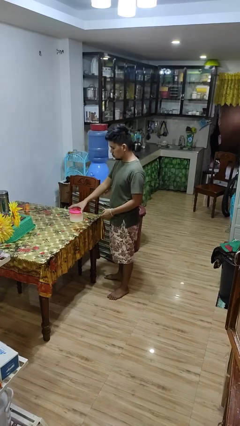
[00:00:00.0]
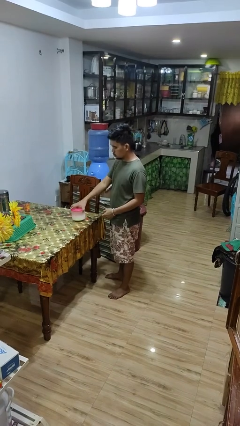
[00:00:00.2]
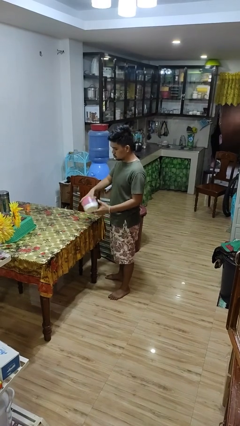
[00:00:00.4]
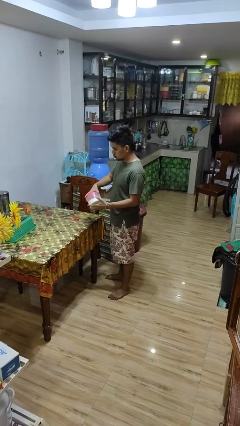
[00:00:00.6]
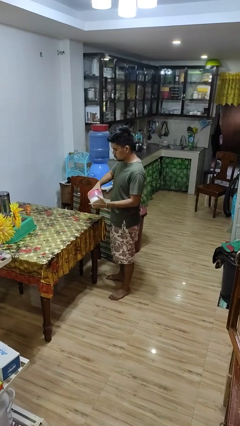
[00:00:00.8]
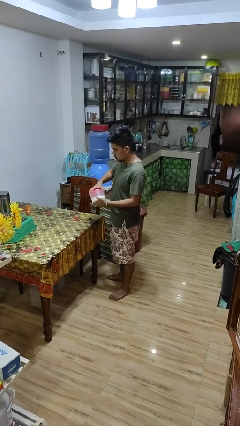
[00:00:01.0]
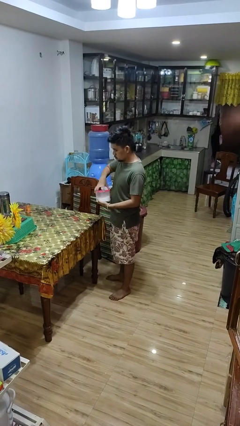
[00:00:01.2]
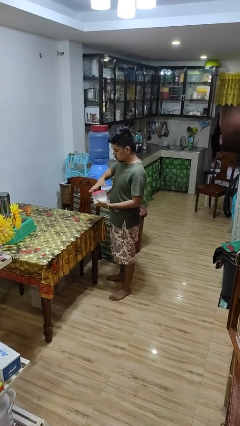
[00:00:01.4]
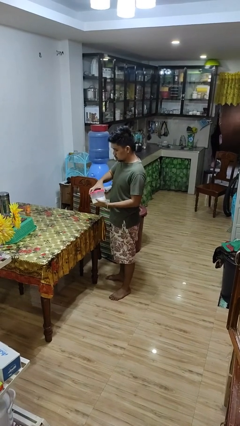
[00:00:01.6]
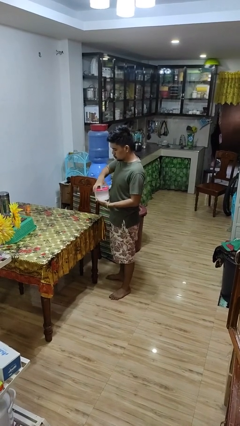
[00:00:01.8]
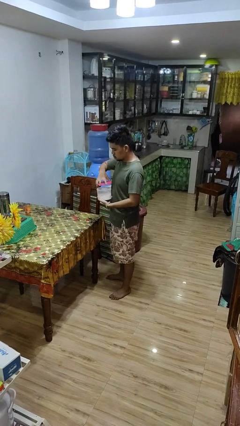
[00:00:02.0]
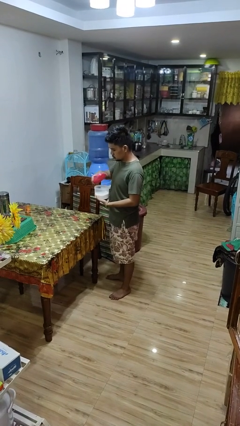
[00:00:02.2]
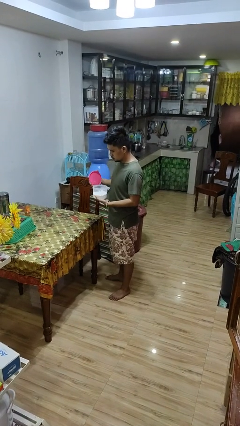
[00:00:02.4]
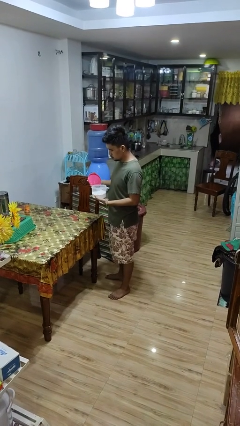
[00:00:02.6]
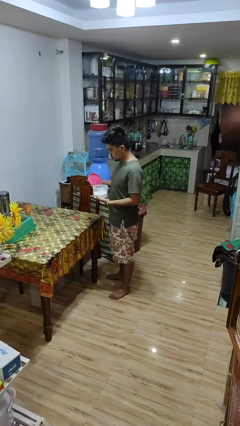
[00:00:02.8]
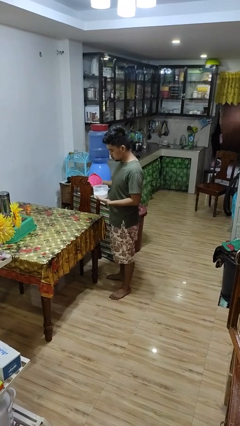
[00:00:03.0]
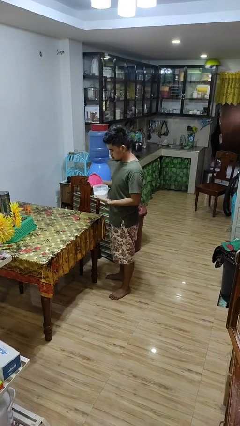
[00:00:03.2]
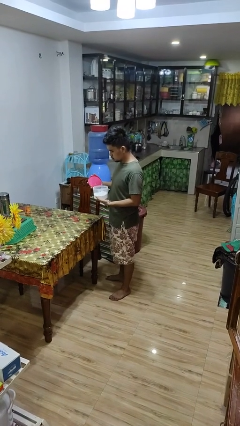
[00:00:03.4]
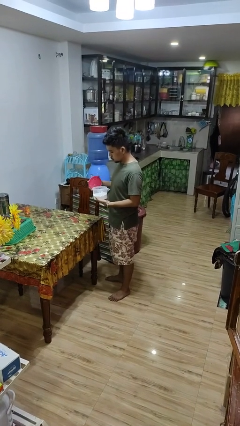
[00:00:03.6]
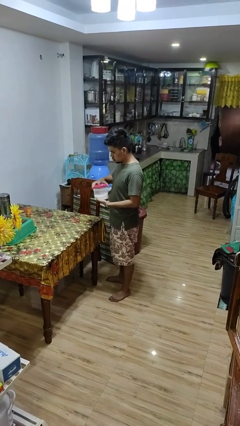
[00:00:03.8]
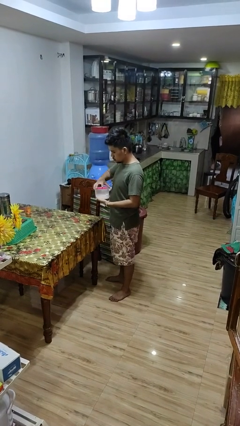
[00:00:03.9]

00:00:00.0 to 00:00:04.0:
person opens jar

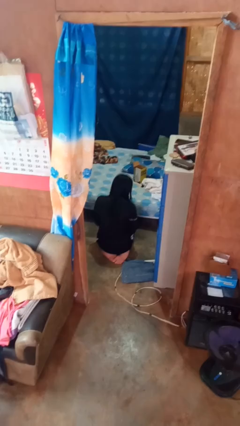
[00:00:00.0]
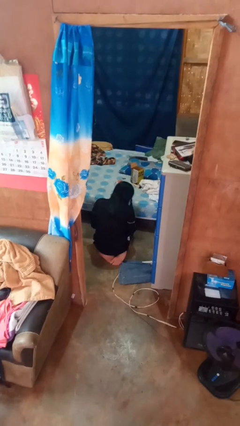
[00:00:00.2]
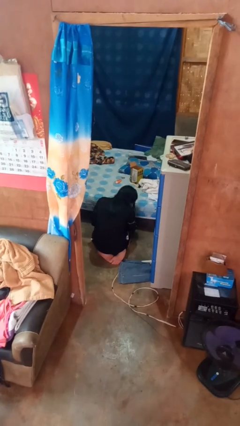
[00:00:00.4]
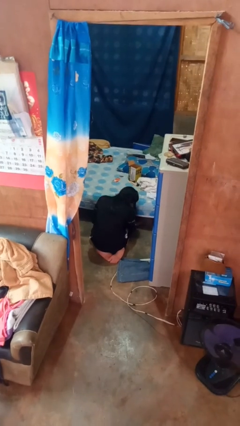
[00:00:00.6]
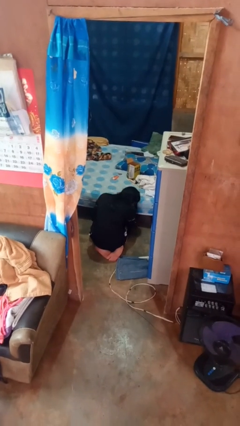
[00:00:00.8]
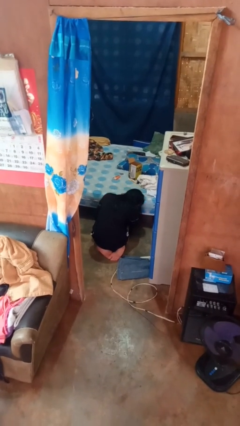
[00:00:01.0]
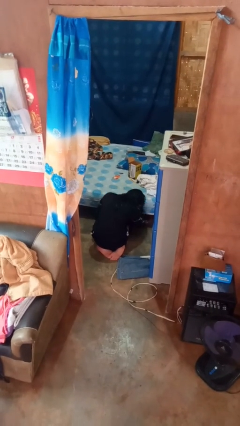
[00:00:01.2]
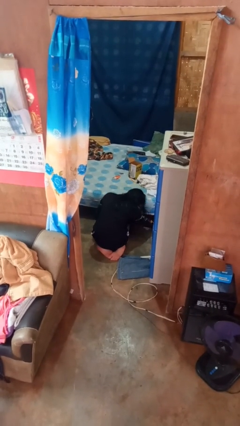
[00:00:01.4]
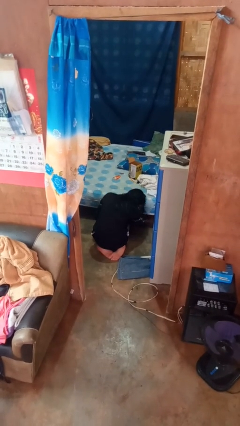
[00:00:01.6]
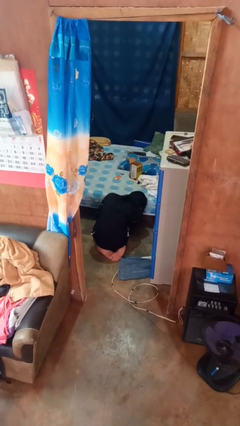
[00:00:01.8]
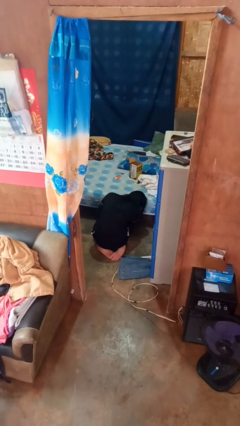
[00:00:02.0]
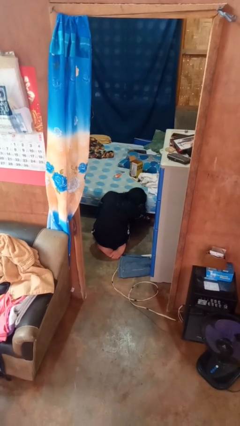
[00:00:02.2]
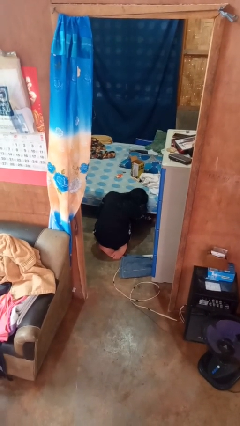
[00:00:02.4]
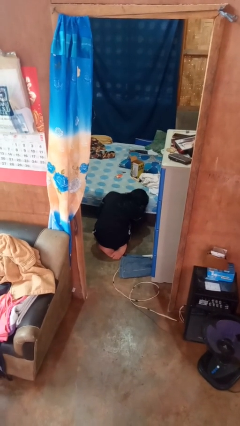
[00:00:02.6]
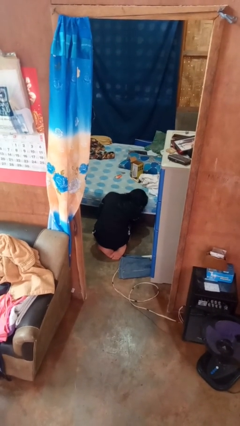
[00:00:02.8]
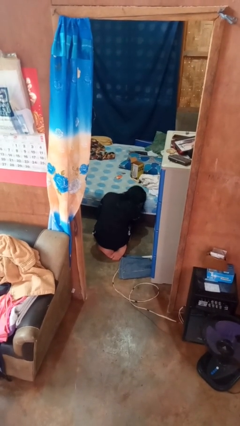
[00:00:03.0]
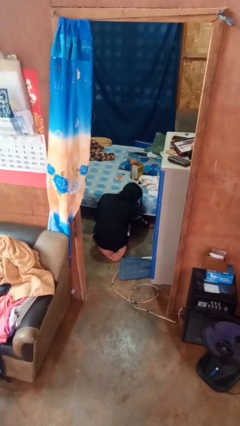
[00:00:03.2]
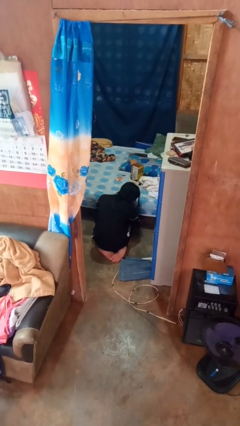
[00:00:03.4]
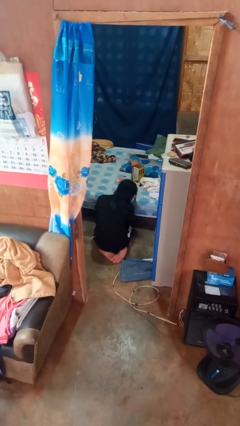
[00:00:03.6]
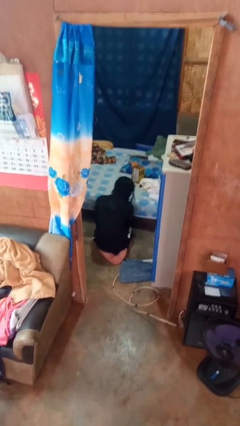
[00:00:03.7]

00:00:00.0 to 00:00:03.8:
person searches under bed

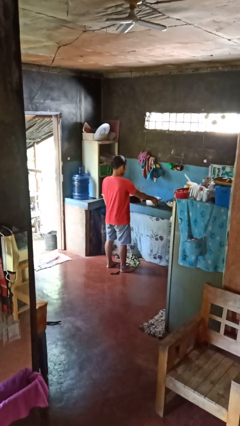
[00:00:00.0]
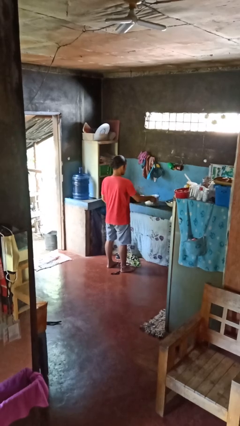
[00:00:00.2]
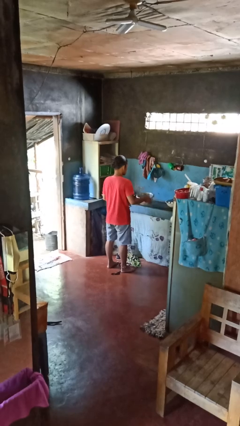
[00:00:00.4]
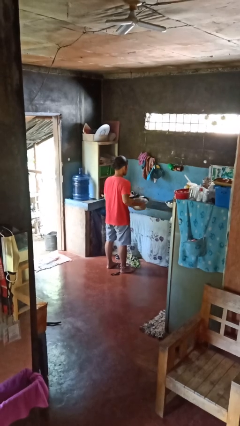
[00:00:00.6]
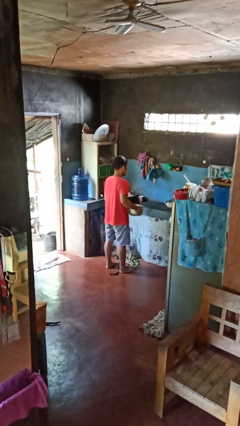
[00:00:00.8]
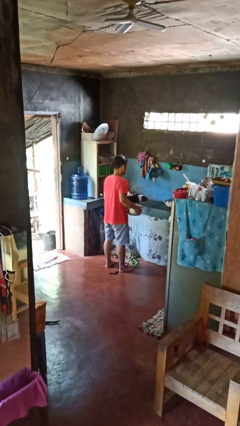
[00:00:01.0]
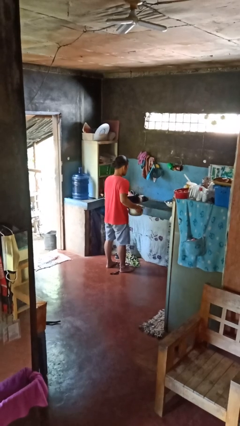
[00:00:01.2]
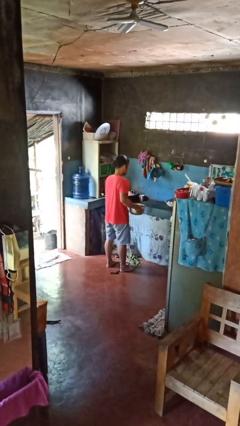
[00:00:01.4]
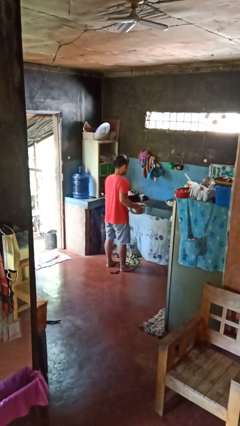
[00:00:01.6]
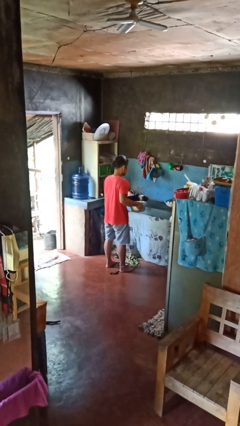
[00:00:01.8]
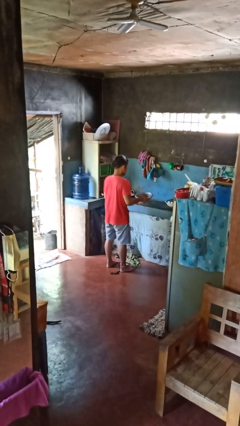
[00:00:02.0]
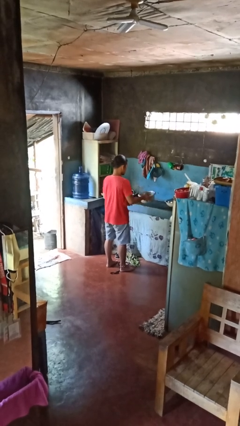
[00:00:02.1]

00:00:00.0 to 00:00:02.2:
person picks up object from countertop

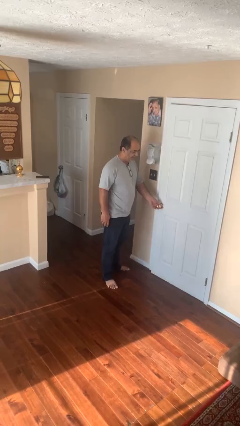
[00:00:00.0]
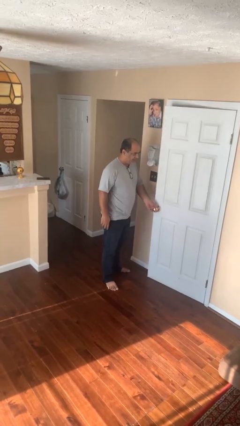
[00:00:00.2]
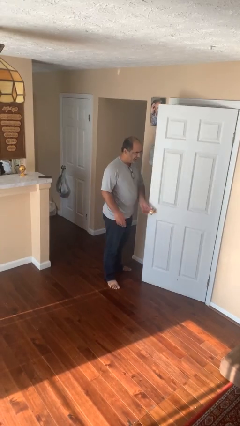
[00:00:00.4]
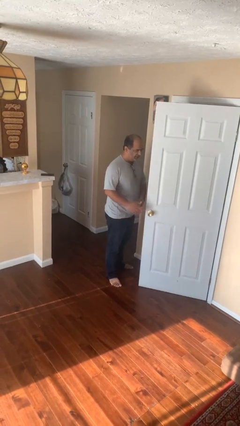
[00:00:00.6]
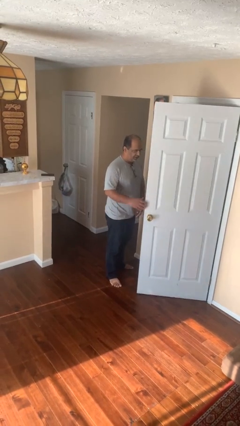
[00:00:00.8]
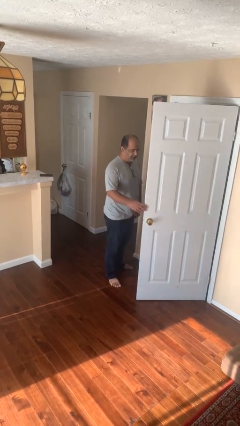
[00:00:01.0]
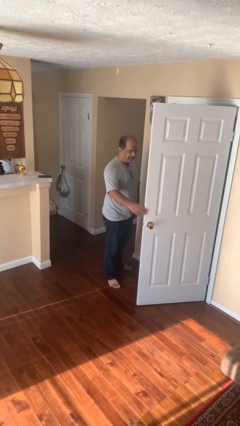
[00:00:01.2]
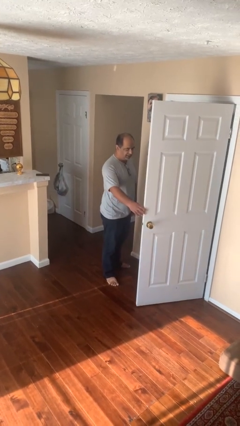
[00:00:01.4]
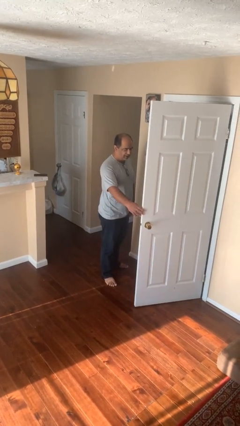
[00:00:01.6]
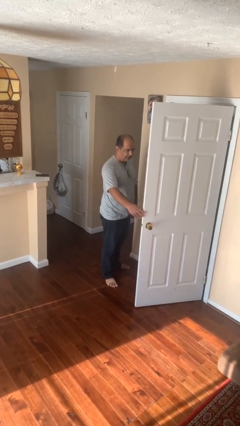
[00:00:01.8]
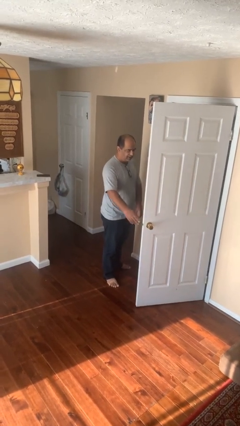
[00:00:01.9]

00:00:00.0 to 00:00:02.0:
person opens facility door

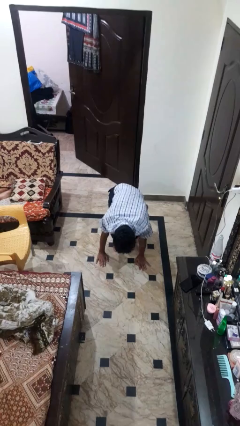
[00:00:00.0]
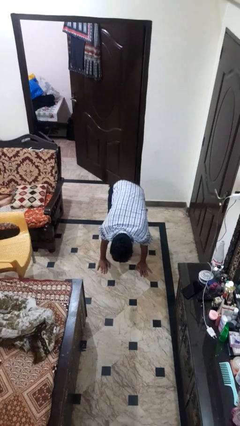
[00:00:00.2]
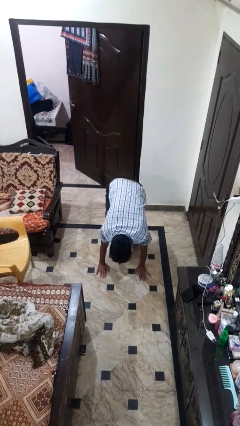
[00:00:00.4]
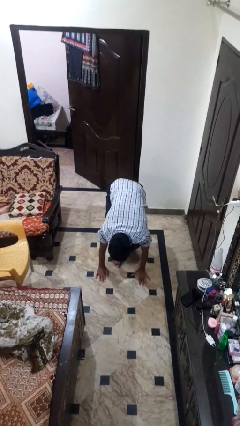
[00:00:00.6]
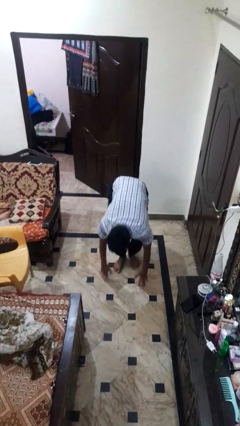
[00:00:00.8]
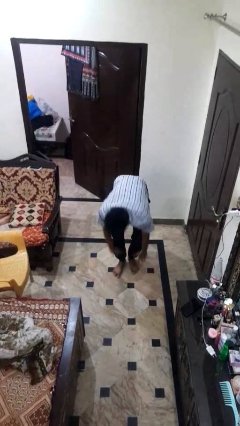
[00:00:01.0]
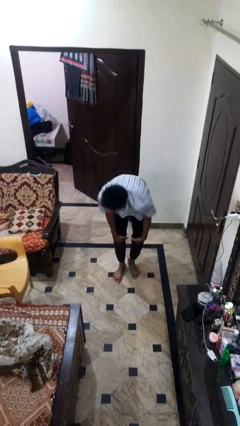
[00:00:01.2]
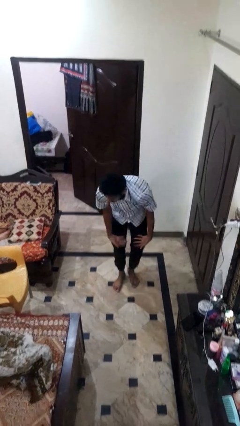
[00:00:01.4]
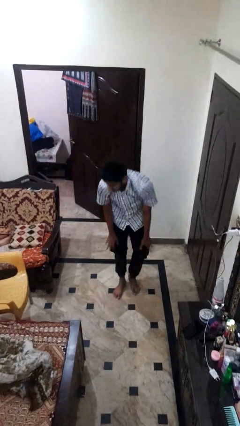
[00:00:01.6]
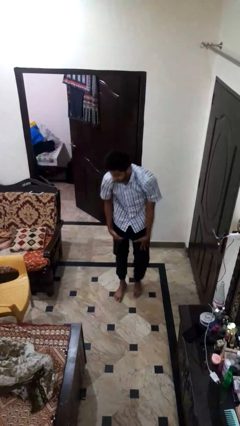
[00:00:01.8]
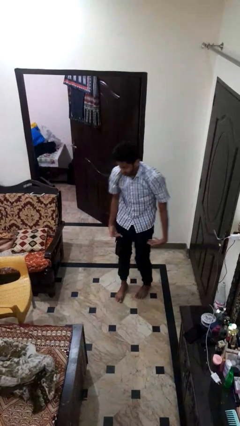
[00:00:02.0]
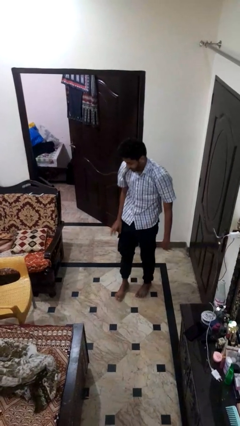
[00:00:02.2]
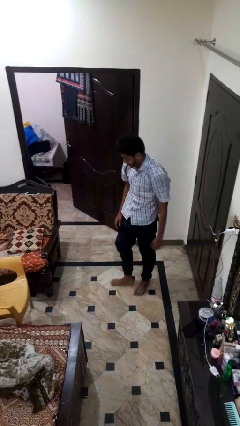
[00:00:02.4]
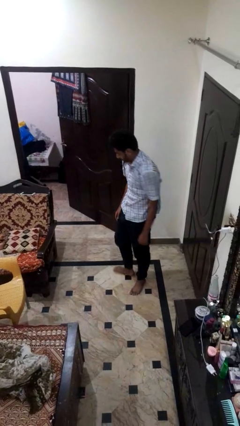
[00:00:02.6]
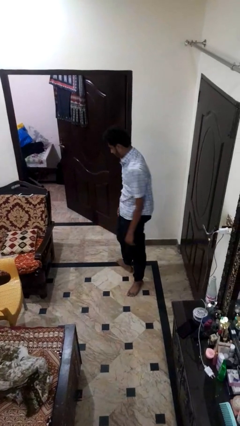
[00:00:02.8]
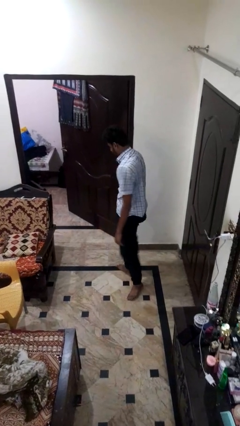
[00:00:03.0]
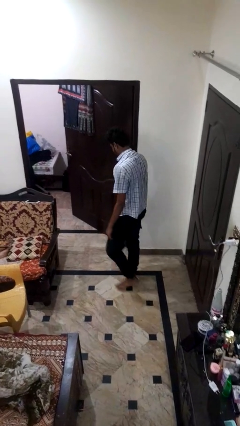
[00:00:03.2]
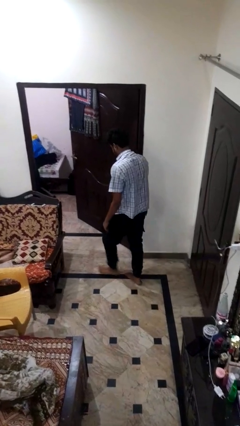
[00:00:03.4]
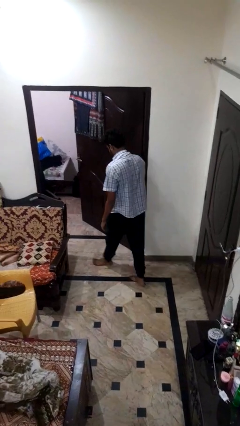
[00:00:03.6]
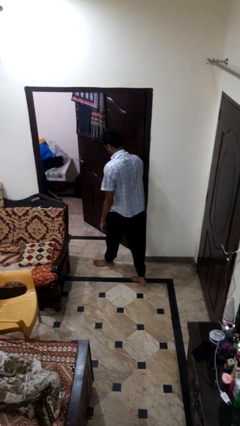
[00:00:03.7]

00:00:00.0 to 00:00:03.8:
person stands up from floor

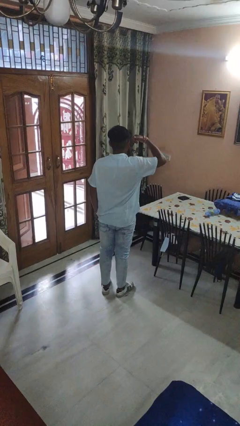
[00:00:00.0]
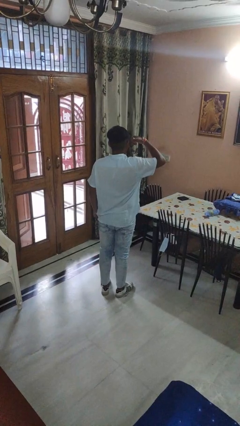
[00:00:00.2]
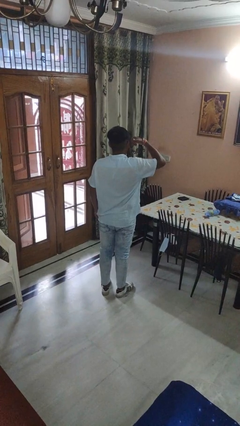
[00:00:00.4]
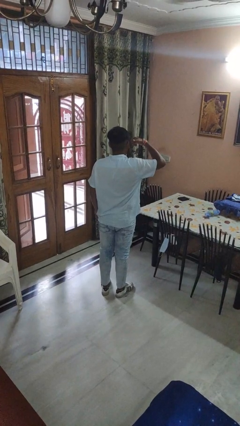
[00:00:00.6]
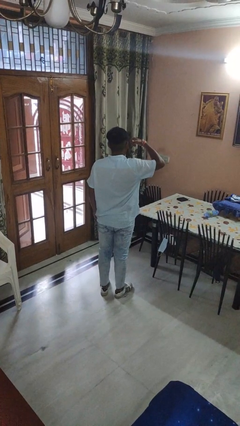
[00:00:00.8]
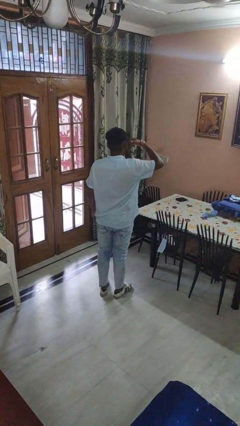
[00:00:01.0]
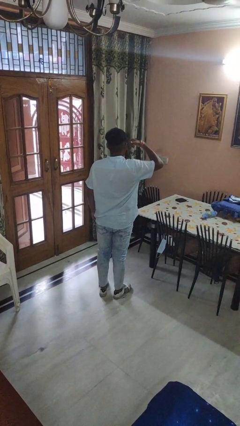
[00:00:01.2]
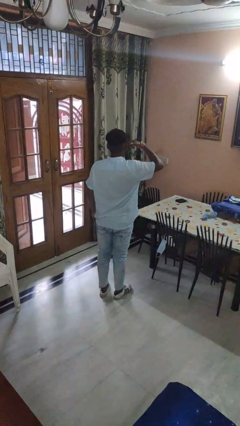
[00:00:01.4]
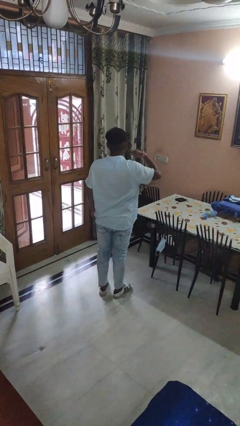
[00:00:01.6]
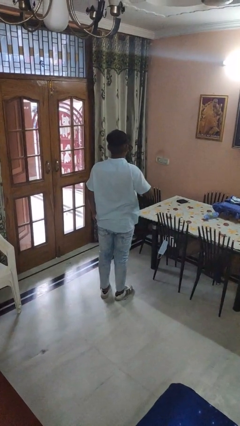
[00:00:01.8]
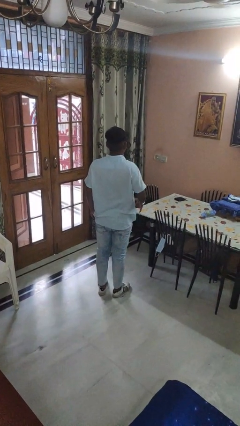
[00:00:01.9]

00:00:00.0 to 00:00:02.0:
person gestures call me
